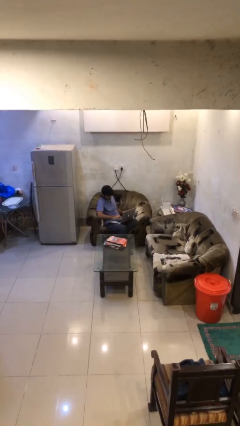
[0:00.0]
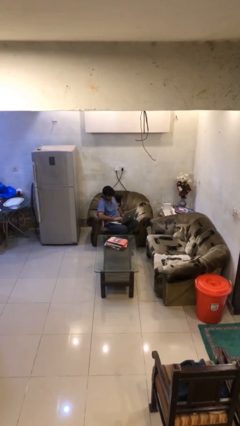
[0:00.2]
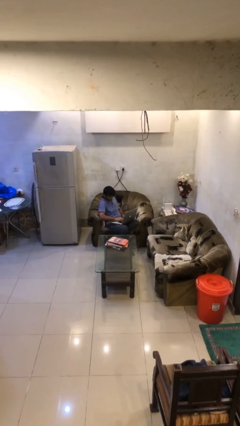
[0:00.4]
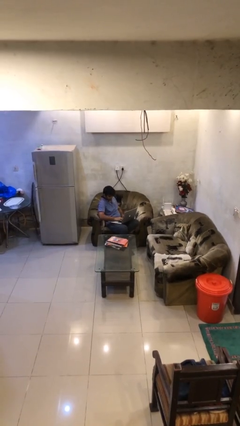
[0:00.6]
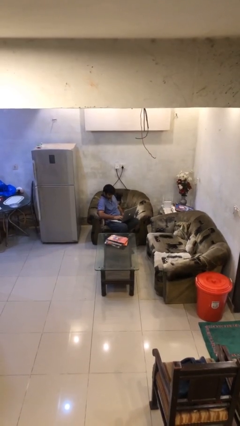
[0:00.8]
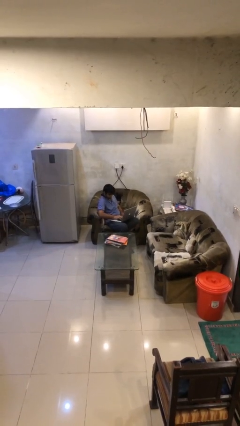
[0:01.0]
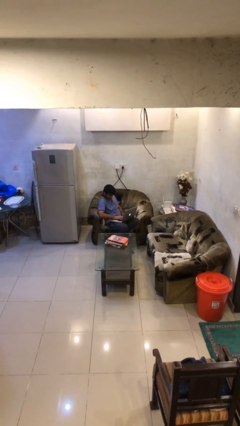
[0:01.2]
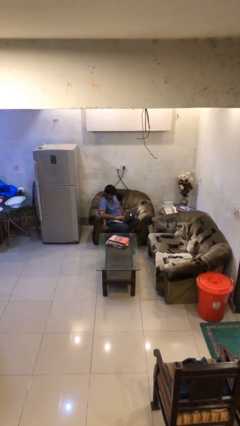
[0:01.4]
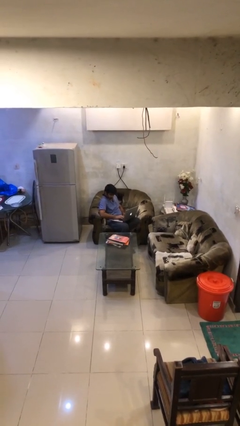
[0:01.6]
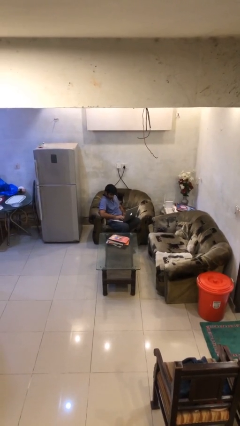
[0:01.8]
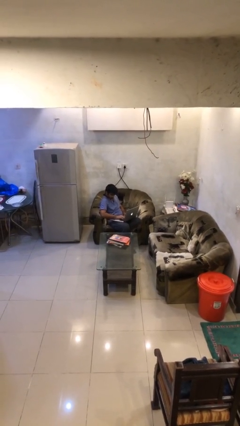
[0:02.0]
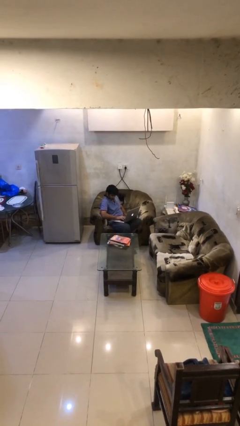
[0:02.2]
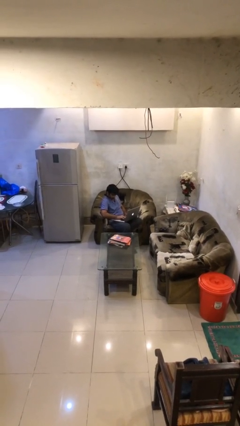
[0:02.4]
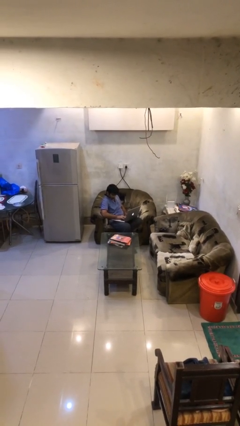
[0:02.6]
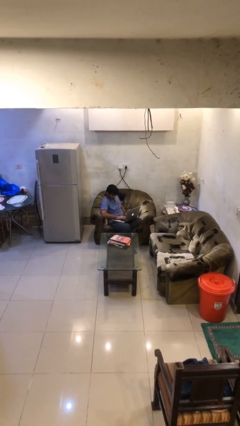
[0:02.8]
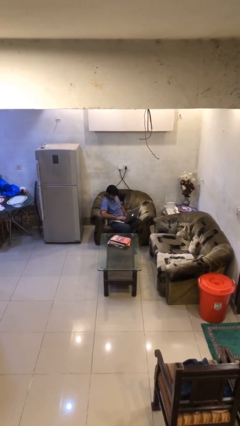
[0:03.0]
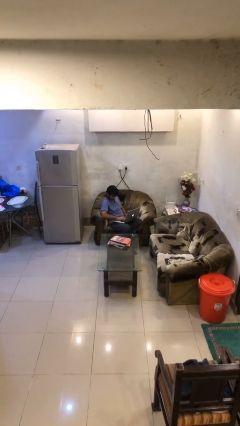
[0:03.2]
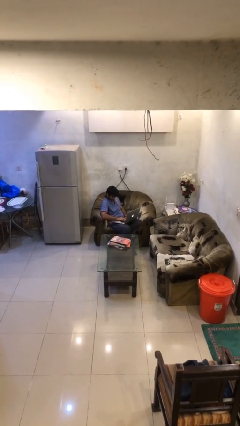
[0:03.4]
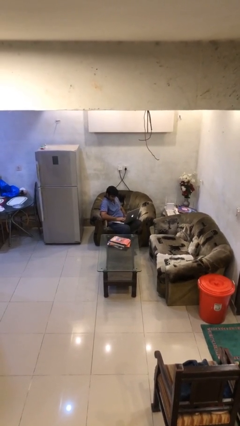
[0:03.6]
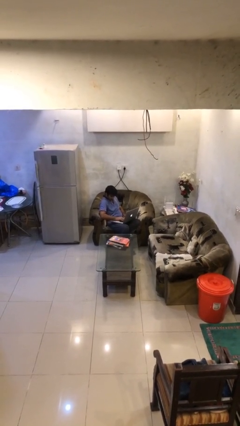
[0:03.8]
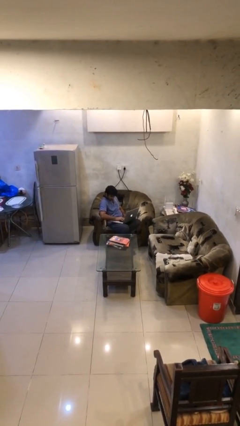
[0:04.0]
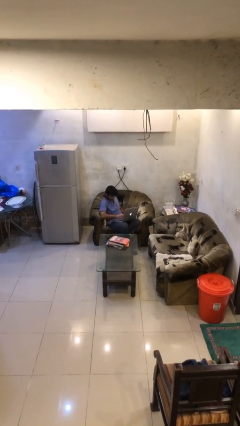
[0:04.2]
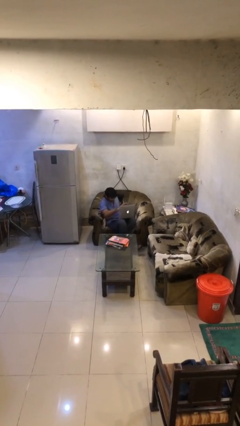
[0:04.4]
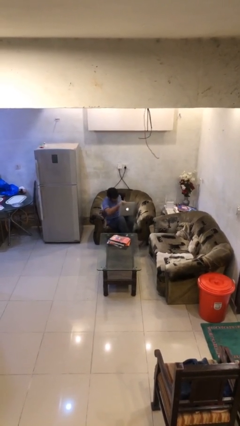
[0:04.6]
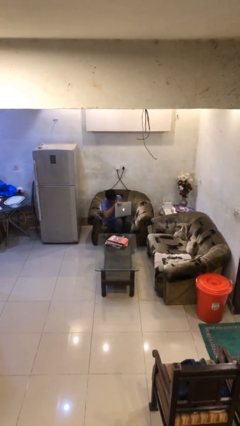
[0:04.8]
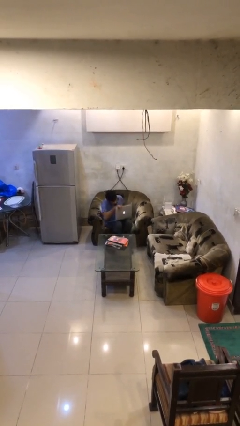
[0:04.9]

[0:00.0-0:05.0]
person interacts with laptop

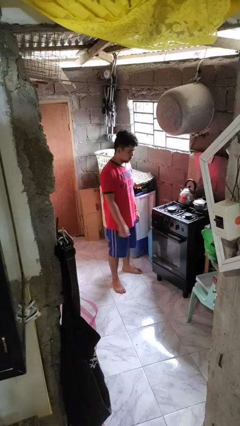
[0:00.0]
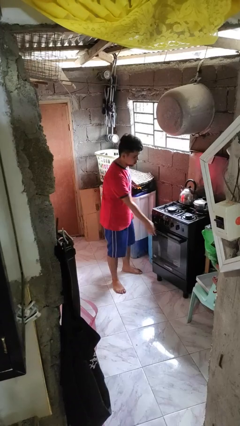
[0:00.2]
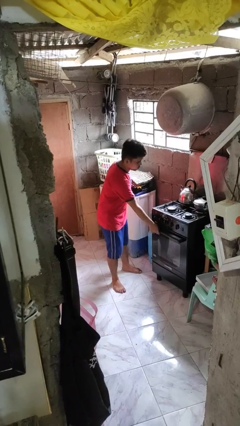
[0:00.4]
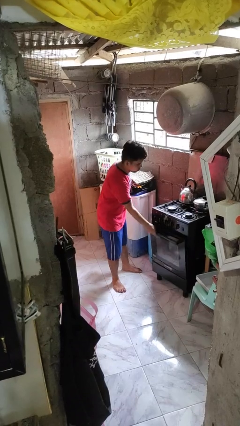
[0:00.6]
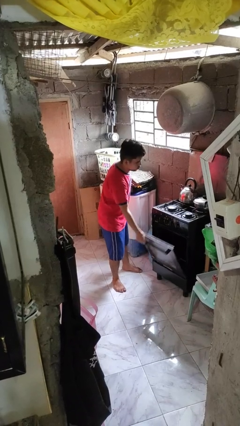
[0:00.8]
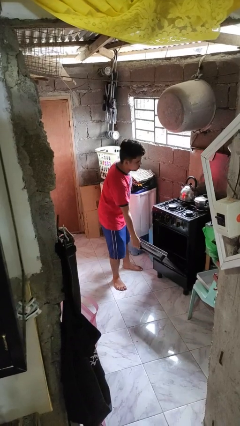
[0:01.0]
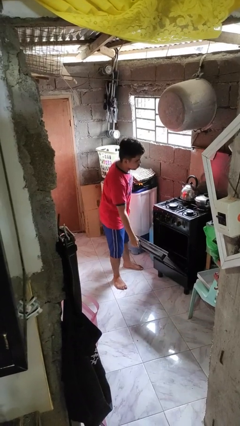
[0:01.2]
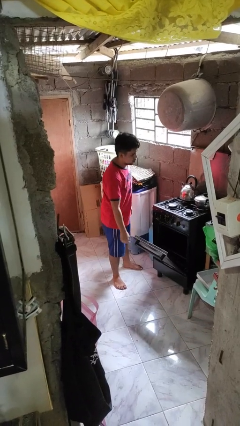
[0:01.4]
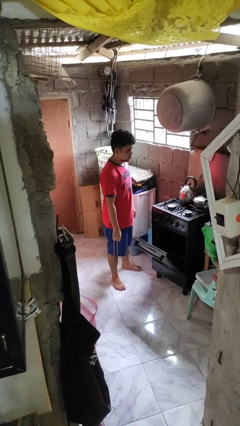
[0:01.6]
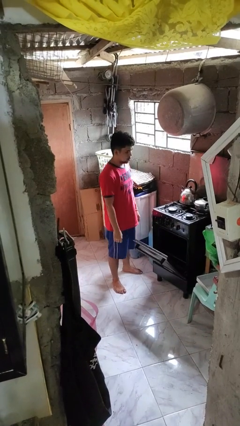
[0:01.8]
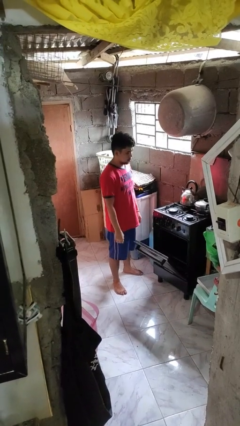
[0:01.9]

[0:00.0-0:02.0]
person opens oven door

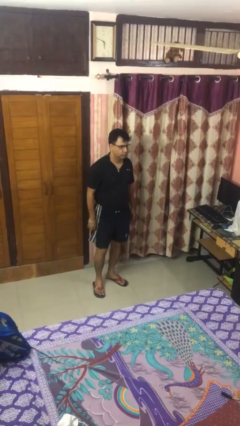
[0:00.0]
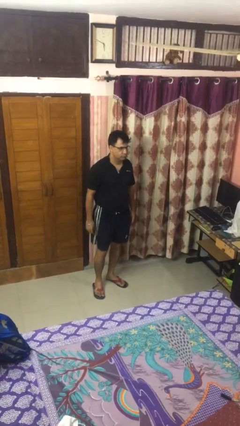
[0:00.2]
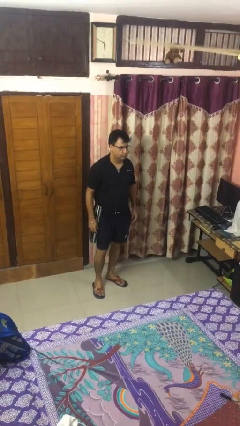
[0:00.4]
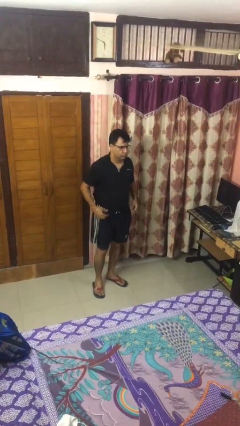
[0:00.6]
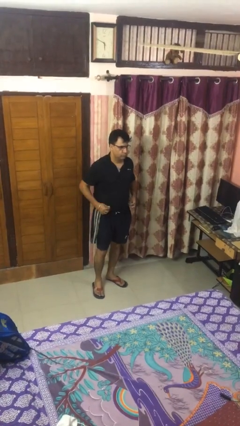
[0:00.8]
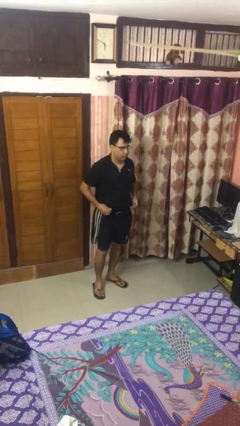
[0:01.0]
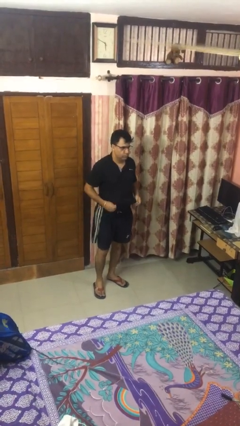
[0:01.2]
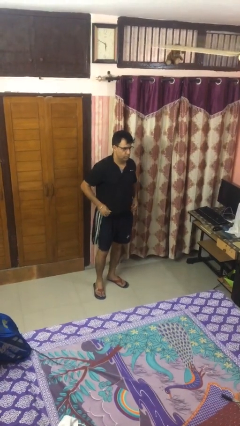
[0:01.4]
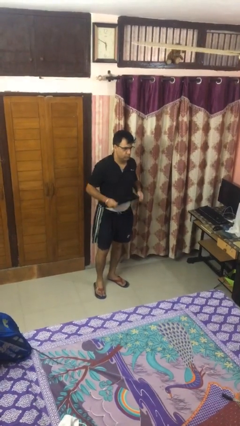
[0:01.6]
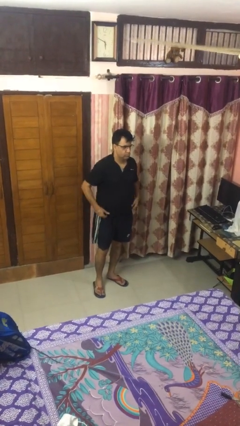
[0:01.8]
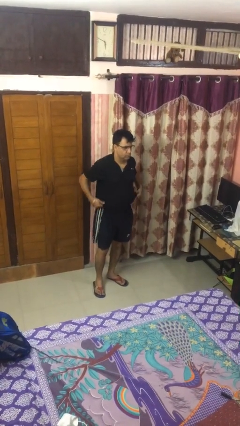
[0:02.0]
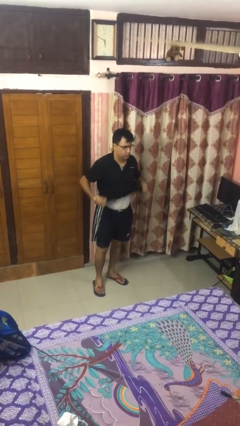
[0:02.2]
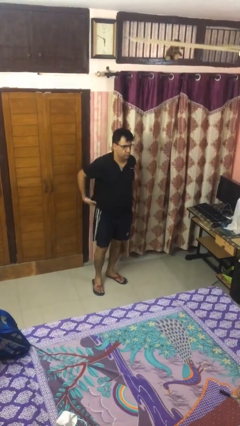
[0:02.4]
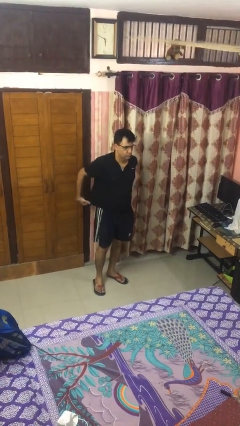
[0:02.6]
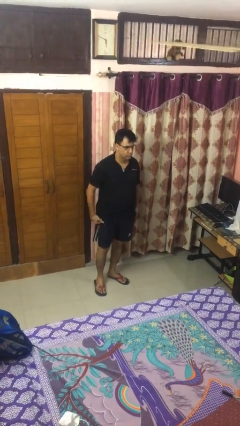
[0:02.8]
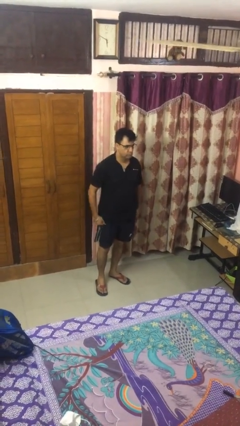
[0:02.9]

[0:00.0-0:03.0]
person untucks shirt

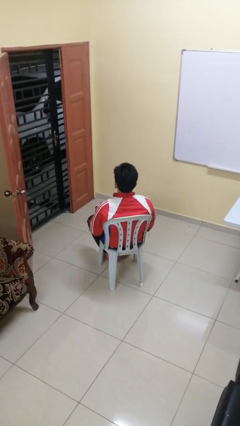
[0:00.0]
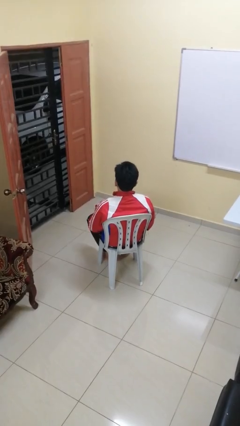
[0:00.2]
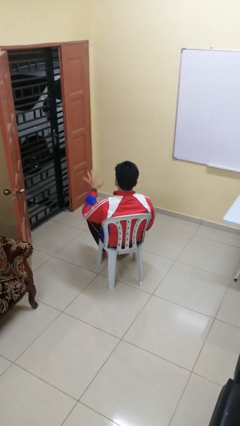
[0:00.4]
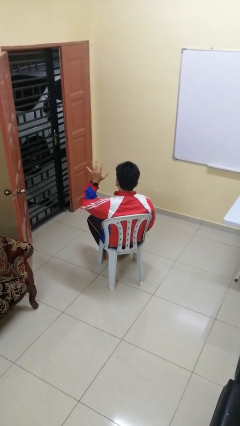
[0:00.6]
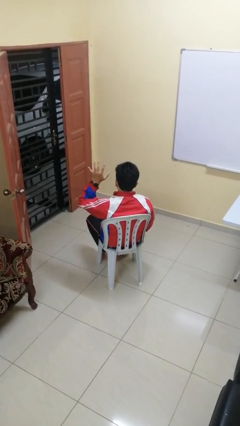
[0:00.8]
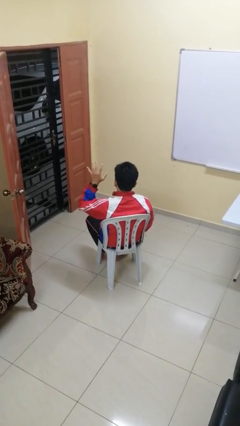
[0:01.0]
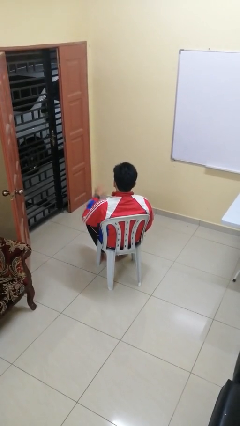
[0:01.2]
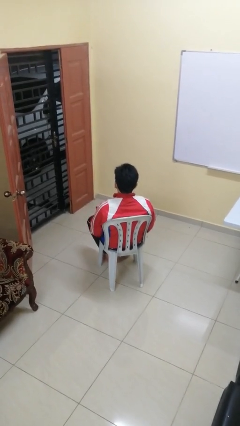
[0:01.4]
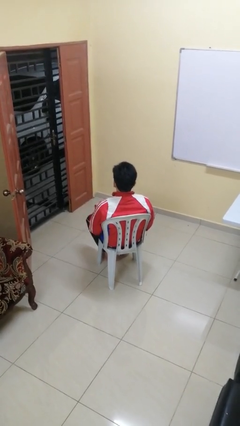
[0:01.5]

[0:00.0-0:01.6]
person gestures number five

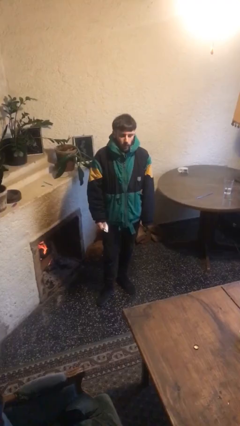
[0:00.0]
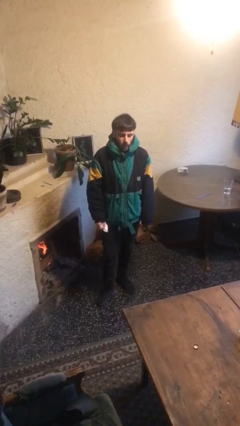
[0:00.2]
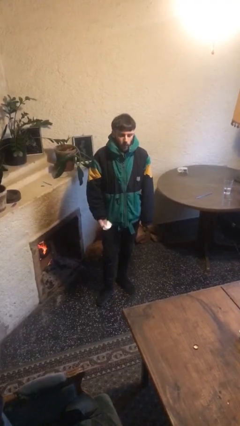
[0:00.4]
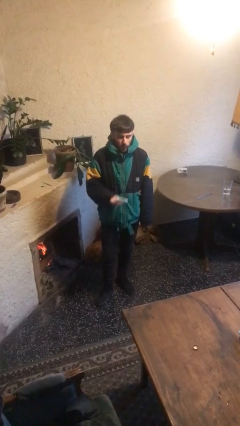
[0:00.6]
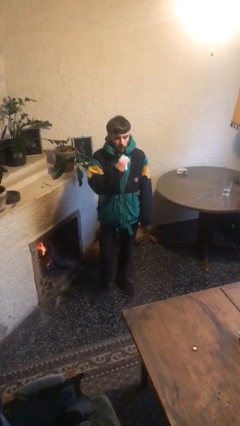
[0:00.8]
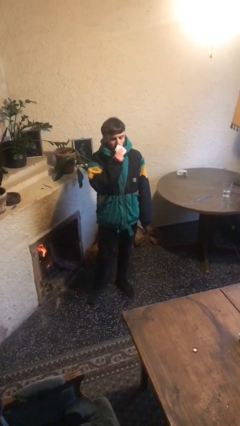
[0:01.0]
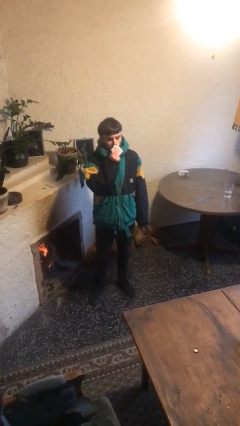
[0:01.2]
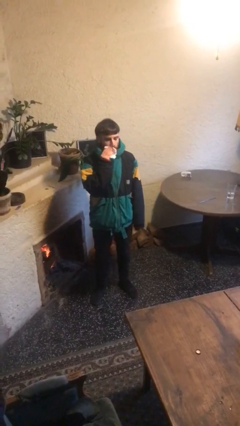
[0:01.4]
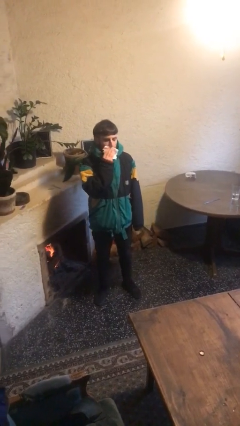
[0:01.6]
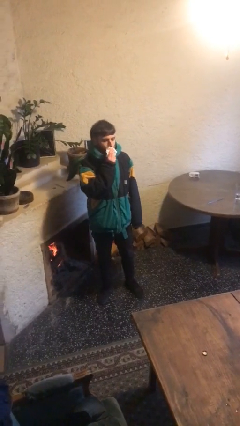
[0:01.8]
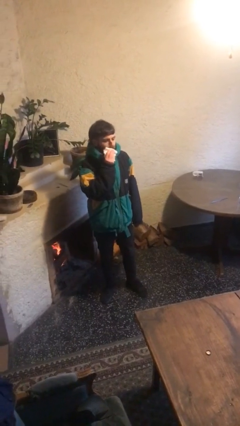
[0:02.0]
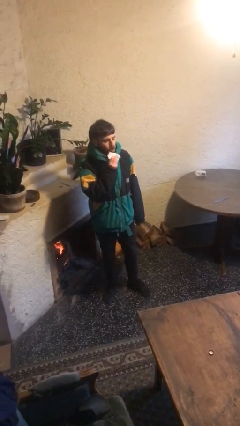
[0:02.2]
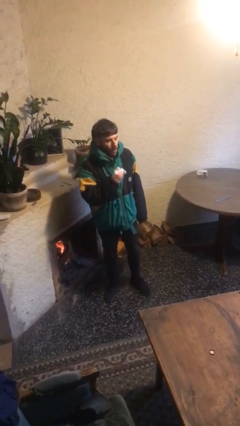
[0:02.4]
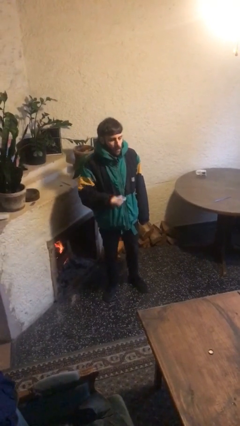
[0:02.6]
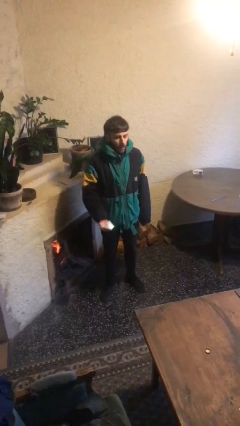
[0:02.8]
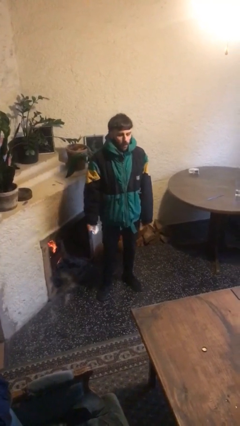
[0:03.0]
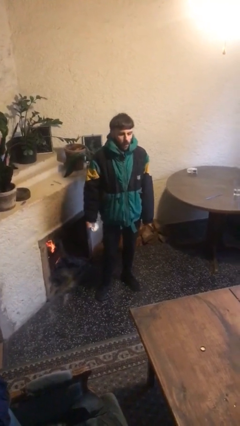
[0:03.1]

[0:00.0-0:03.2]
person wipes mouth with napkin

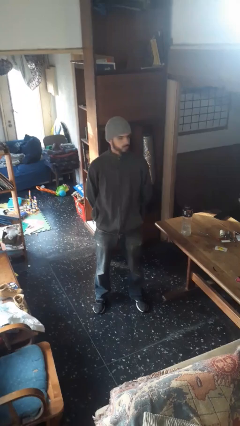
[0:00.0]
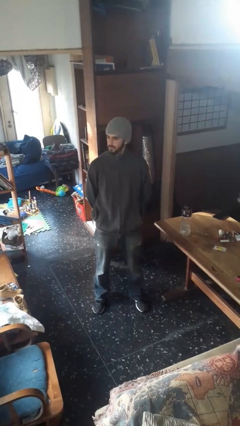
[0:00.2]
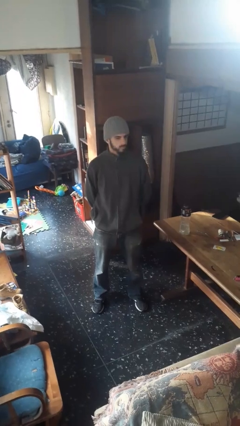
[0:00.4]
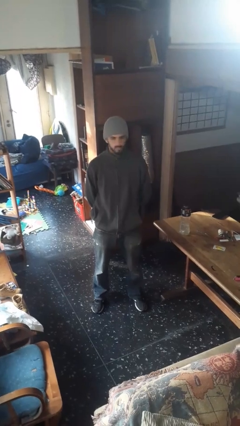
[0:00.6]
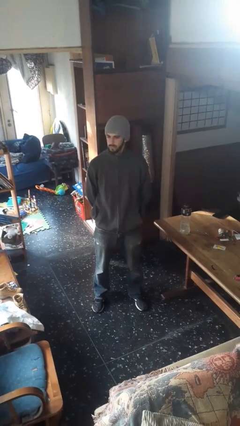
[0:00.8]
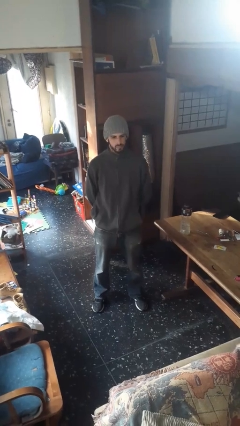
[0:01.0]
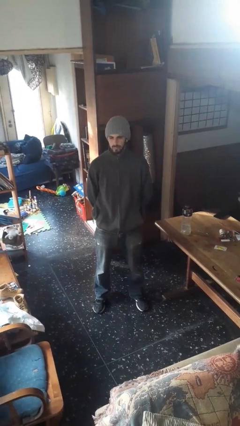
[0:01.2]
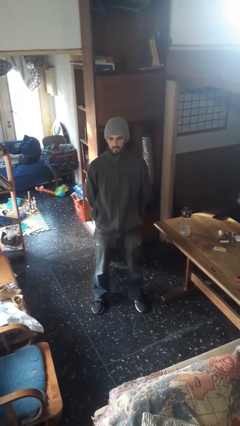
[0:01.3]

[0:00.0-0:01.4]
person shakes head

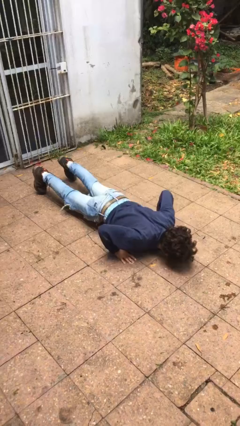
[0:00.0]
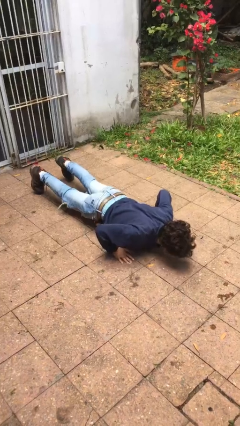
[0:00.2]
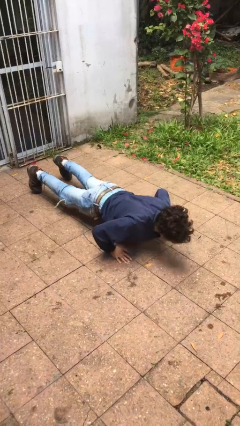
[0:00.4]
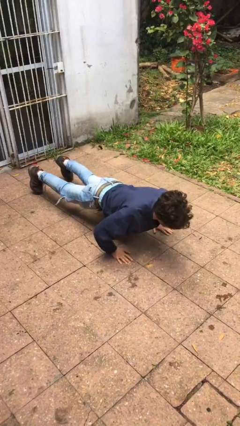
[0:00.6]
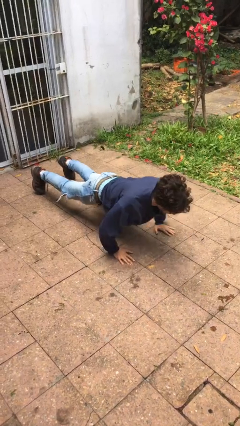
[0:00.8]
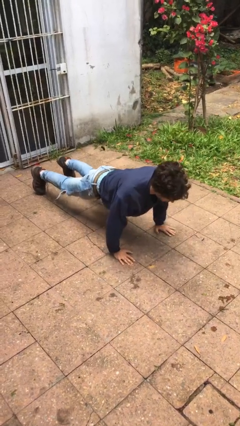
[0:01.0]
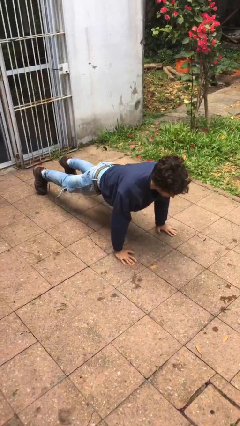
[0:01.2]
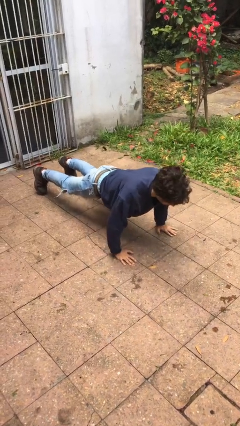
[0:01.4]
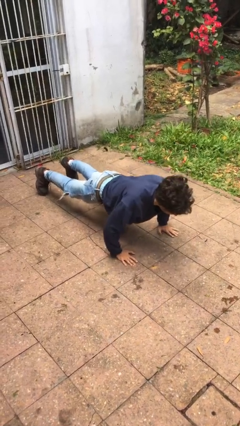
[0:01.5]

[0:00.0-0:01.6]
person exercises with pushup
